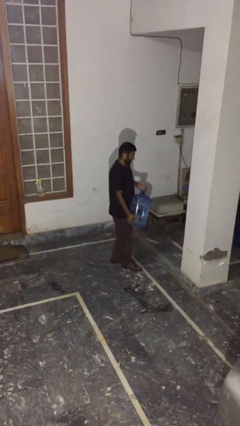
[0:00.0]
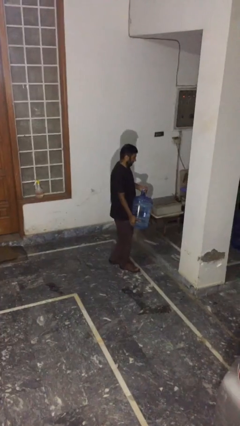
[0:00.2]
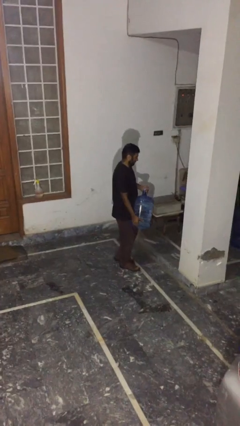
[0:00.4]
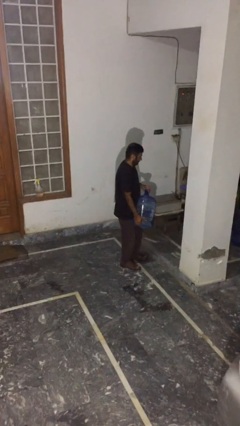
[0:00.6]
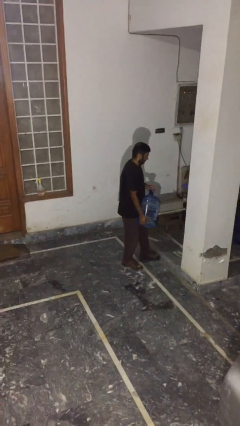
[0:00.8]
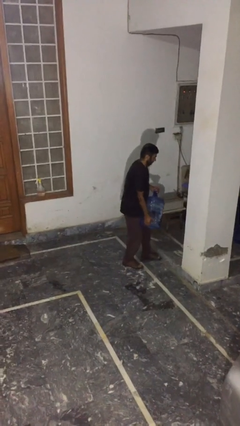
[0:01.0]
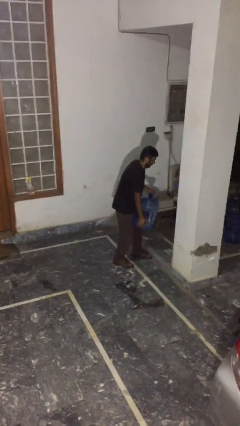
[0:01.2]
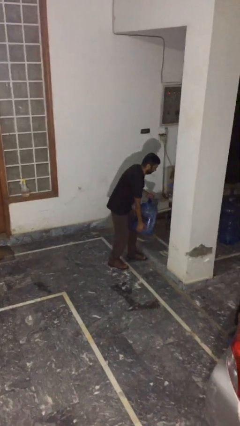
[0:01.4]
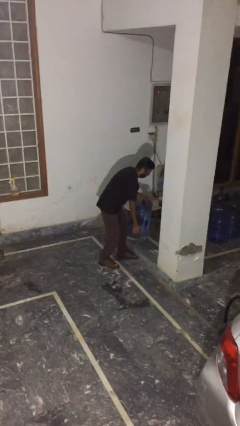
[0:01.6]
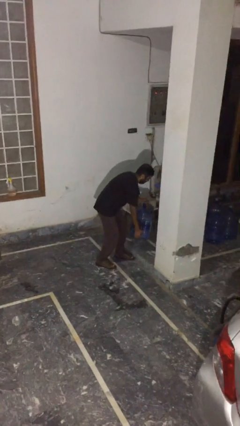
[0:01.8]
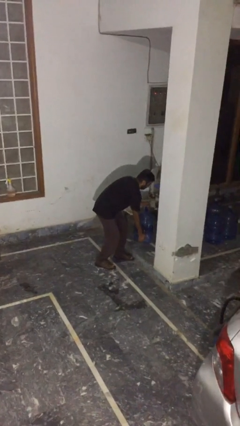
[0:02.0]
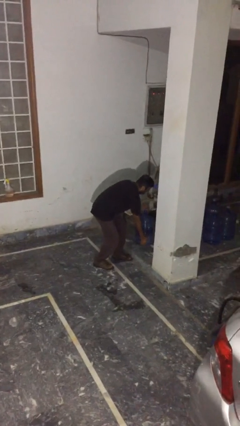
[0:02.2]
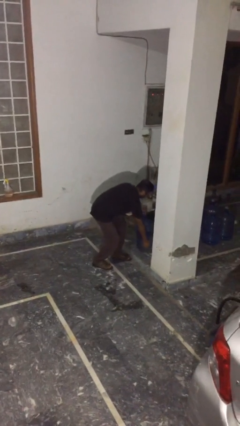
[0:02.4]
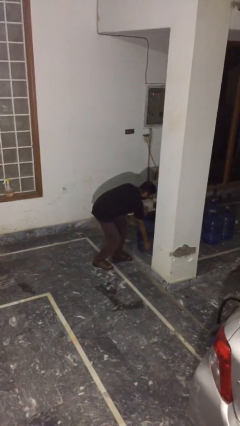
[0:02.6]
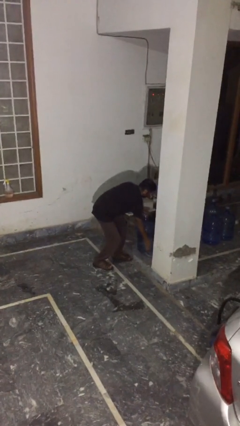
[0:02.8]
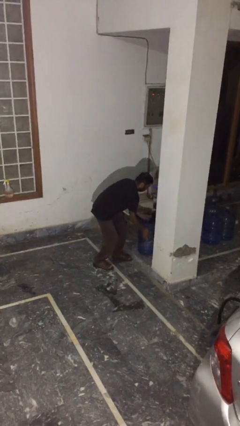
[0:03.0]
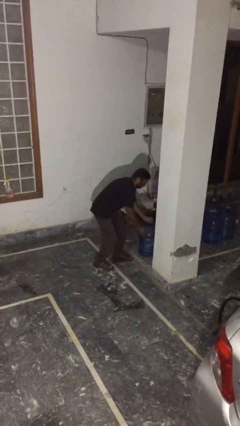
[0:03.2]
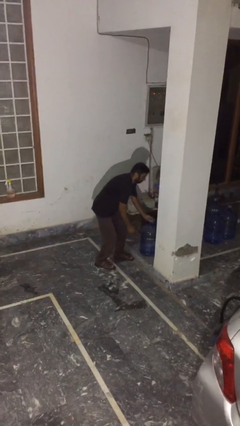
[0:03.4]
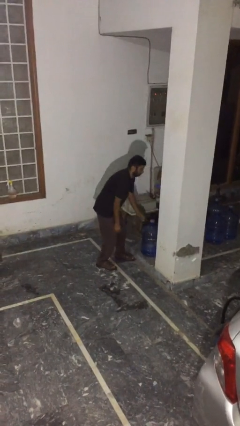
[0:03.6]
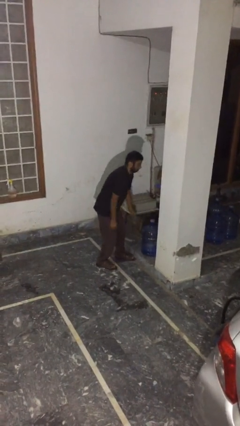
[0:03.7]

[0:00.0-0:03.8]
person puts down object on floor

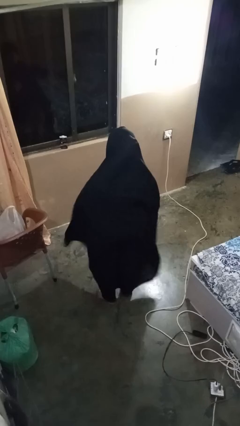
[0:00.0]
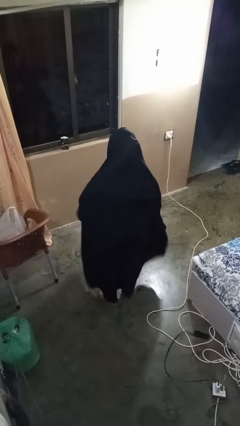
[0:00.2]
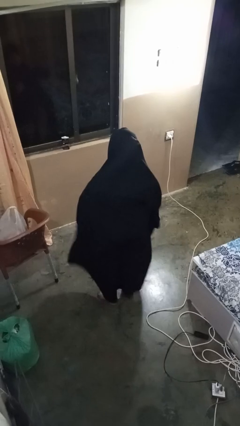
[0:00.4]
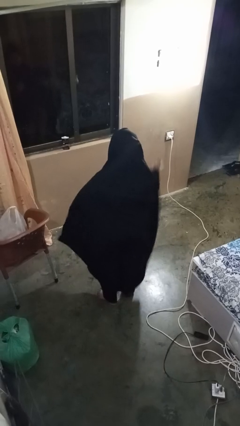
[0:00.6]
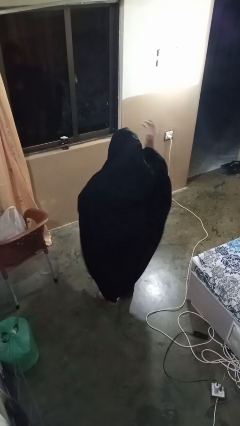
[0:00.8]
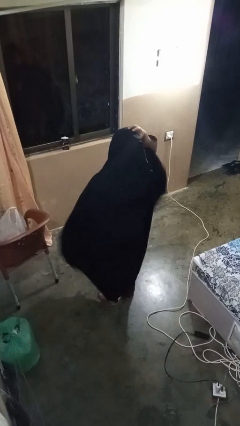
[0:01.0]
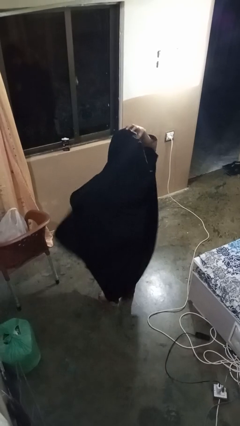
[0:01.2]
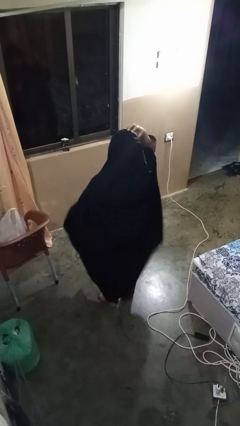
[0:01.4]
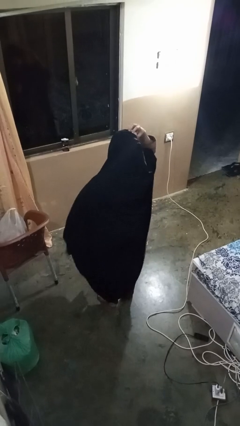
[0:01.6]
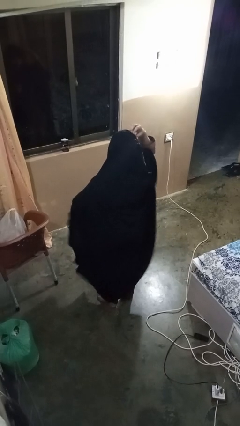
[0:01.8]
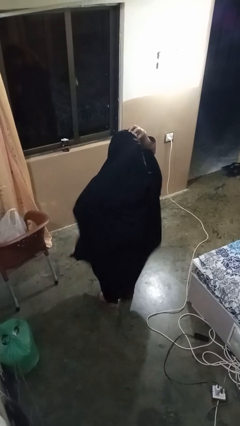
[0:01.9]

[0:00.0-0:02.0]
person scratches face

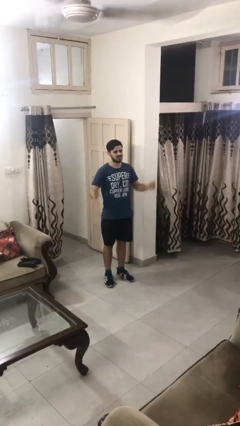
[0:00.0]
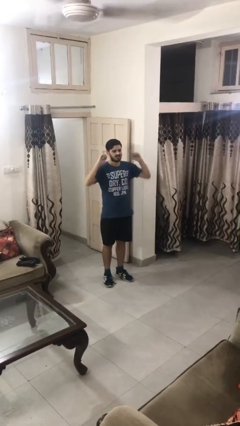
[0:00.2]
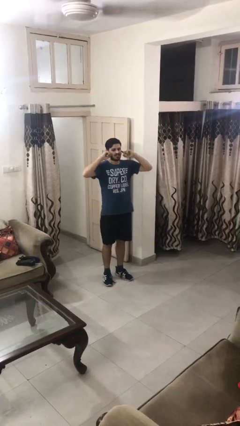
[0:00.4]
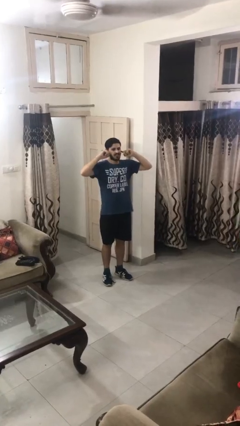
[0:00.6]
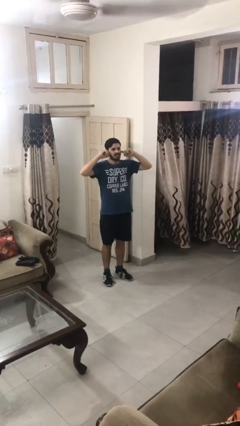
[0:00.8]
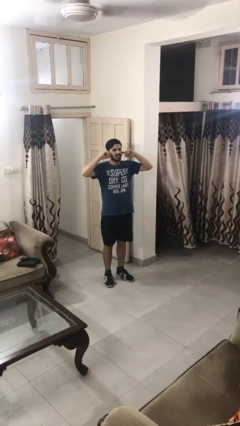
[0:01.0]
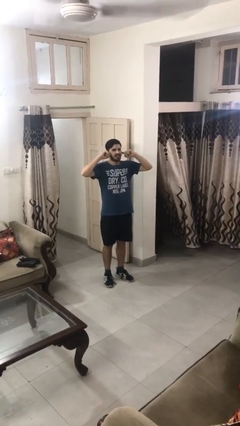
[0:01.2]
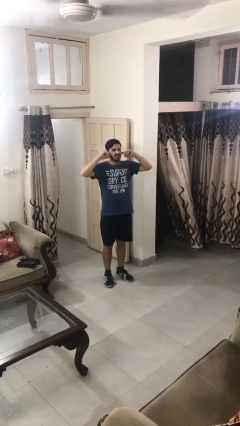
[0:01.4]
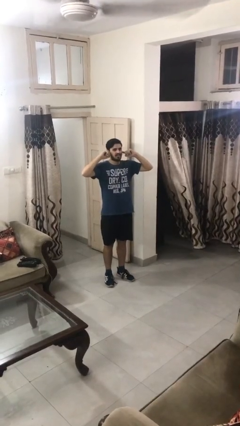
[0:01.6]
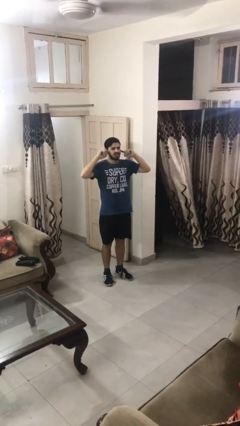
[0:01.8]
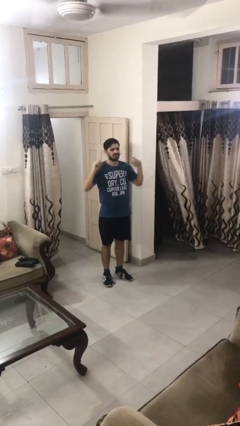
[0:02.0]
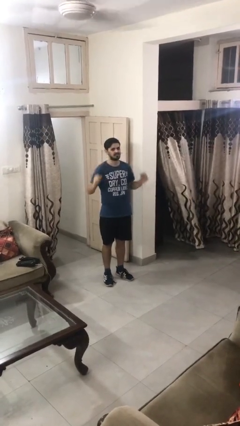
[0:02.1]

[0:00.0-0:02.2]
person puts fingers in ear

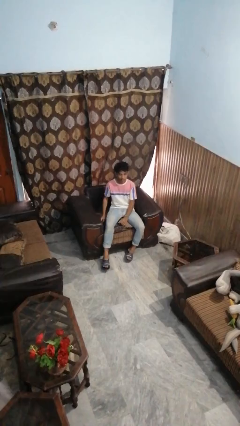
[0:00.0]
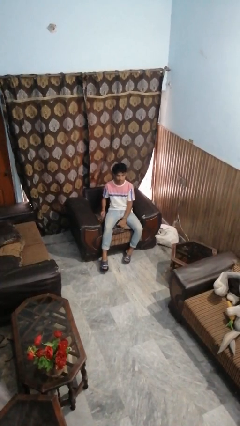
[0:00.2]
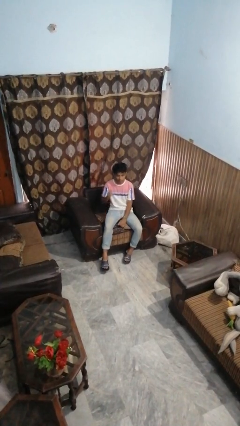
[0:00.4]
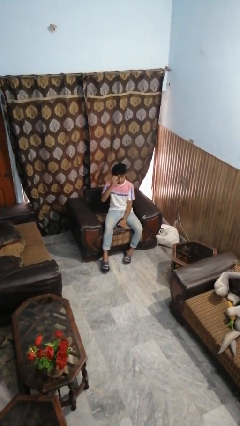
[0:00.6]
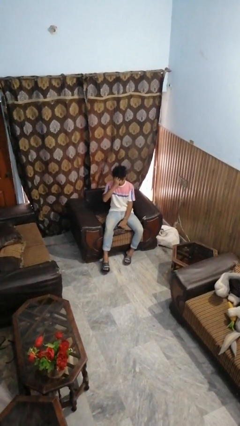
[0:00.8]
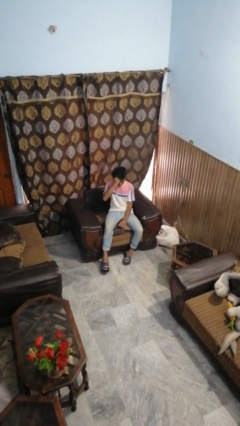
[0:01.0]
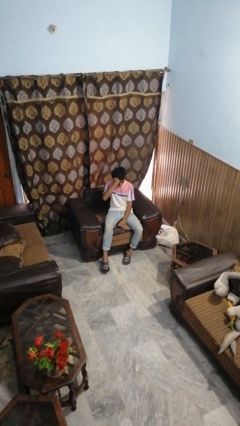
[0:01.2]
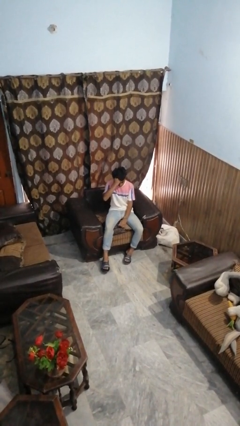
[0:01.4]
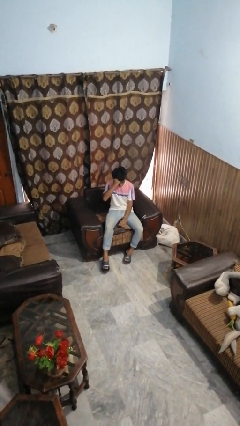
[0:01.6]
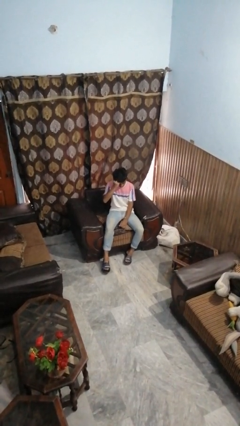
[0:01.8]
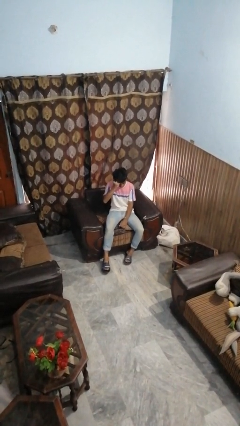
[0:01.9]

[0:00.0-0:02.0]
person strokes hair

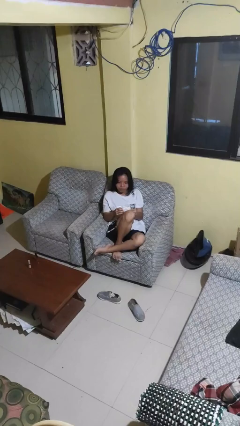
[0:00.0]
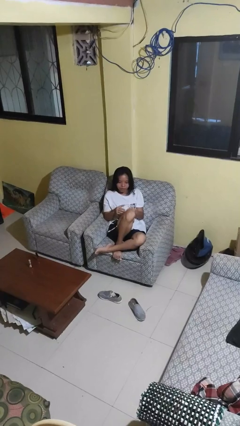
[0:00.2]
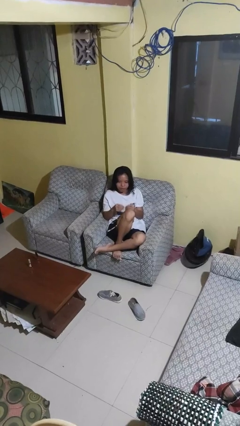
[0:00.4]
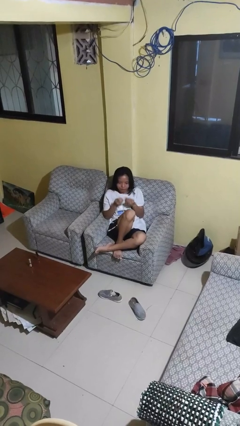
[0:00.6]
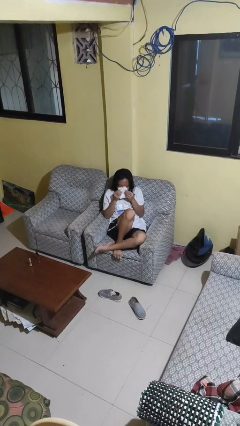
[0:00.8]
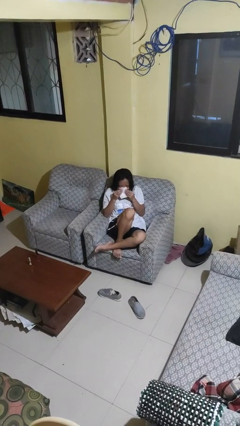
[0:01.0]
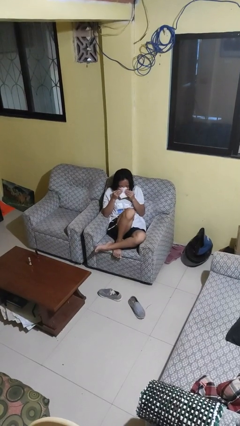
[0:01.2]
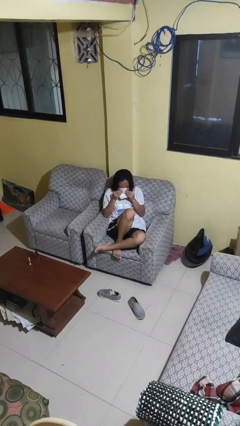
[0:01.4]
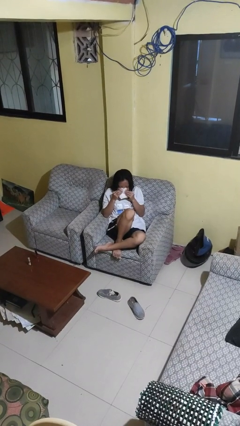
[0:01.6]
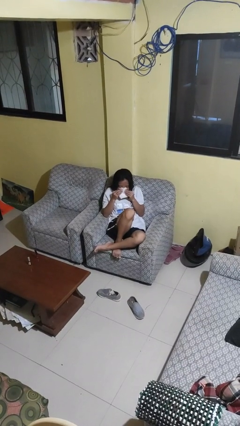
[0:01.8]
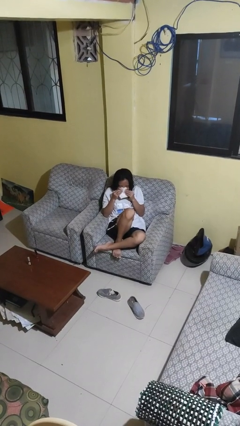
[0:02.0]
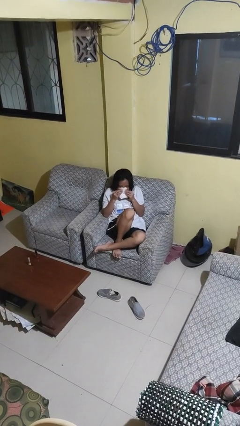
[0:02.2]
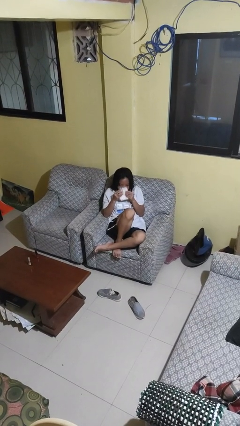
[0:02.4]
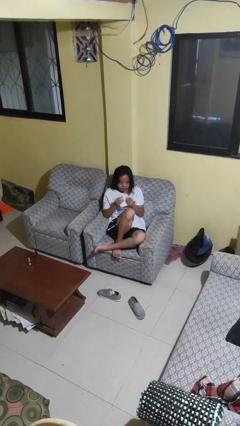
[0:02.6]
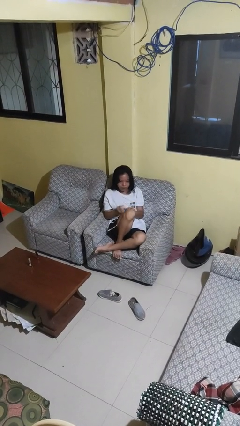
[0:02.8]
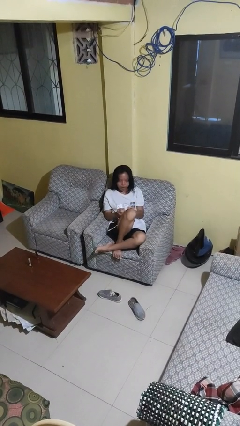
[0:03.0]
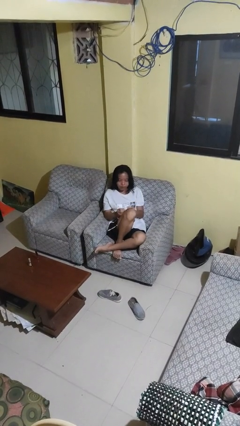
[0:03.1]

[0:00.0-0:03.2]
person blows nose

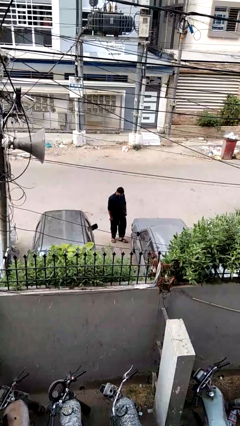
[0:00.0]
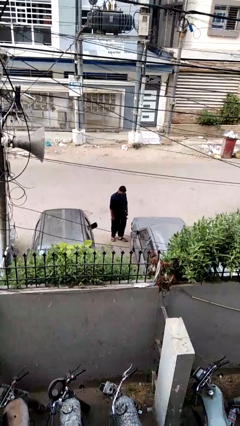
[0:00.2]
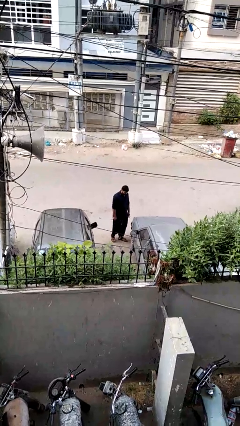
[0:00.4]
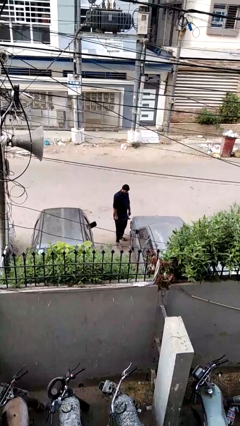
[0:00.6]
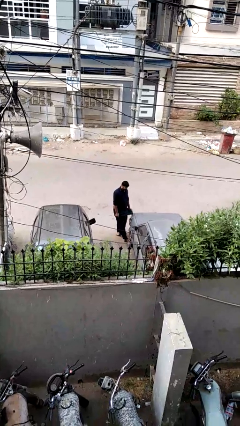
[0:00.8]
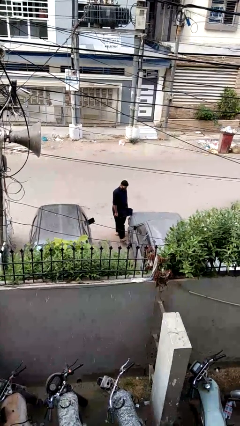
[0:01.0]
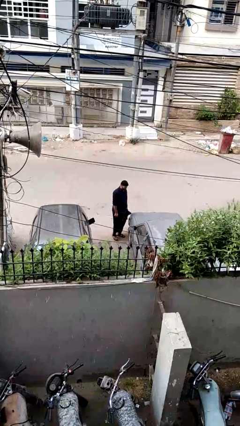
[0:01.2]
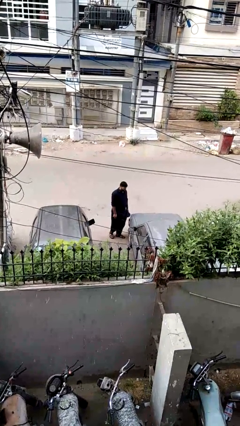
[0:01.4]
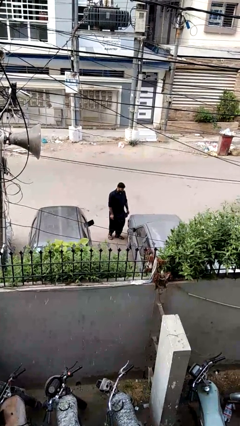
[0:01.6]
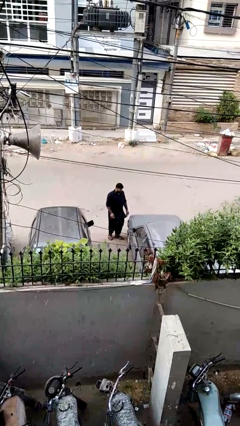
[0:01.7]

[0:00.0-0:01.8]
person kicks car tires

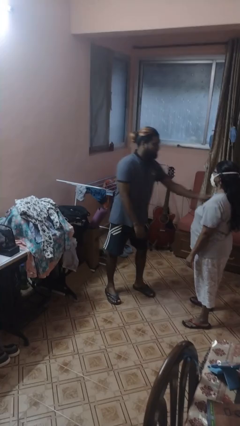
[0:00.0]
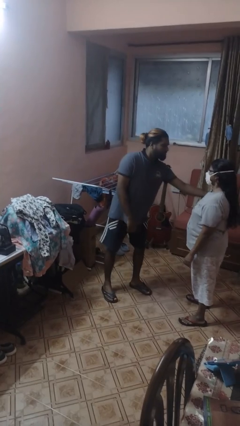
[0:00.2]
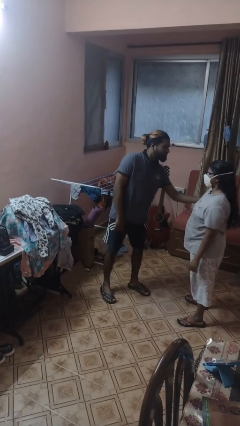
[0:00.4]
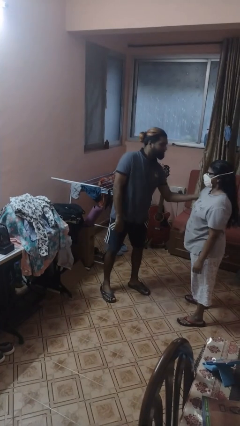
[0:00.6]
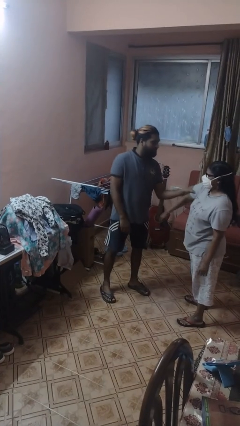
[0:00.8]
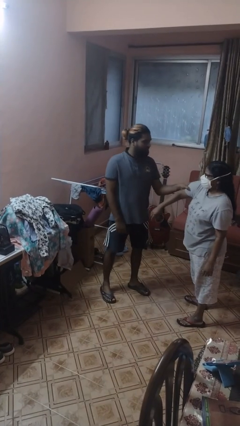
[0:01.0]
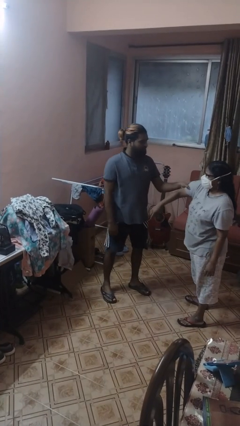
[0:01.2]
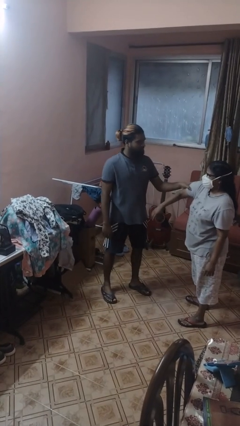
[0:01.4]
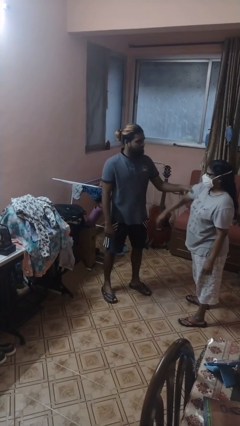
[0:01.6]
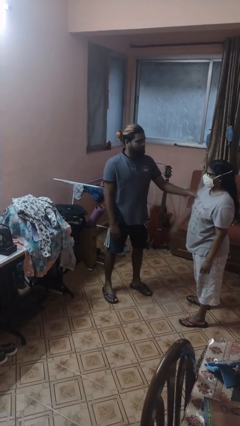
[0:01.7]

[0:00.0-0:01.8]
person grabs person by bicep

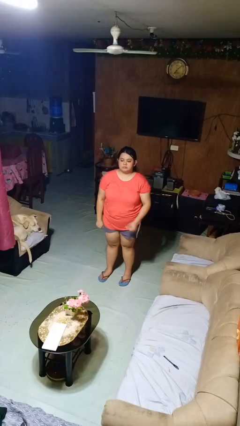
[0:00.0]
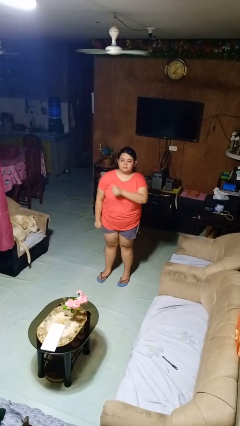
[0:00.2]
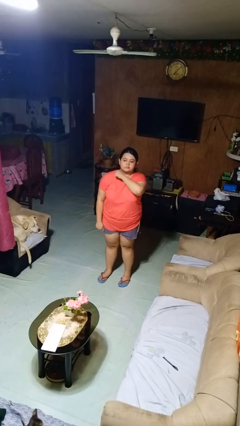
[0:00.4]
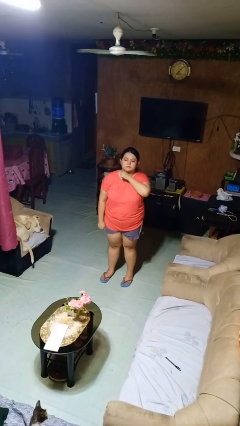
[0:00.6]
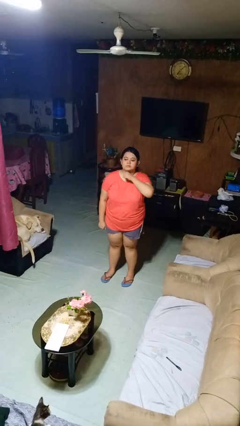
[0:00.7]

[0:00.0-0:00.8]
person gestures cut
